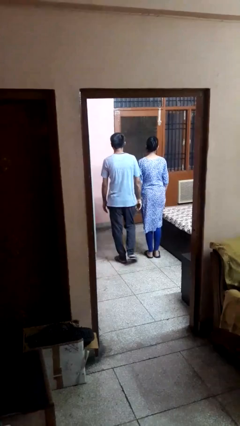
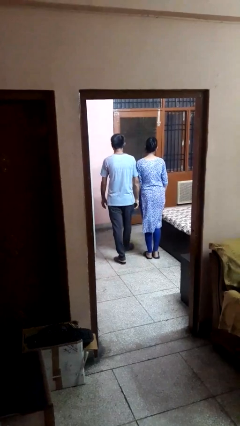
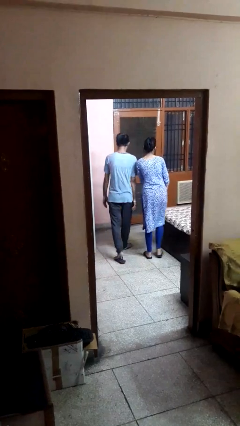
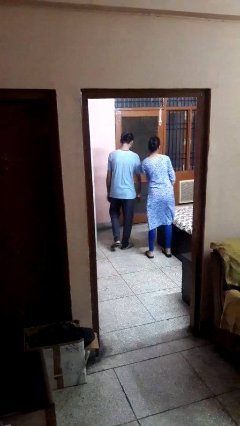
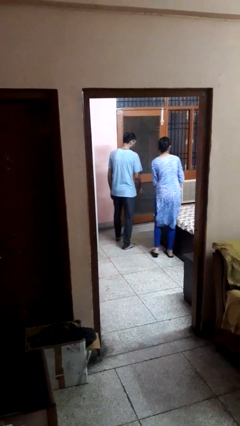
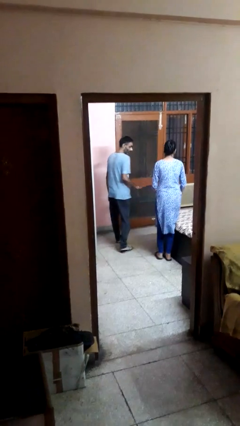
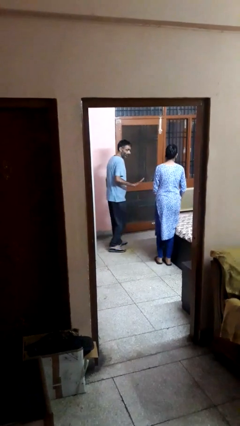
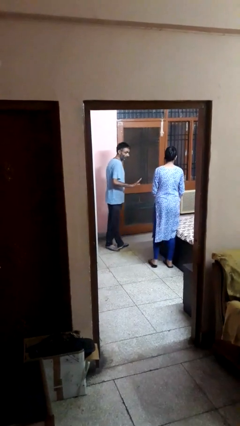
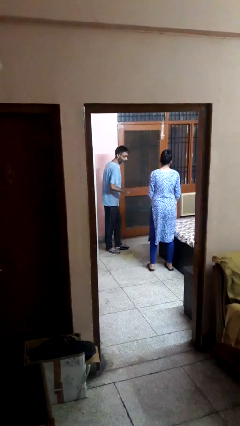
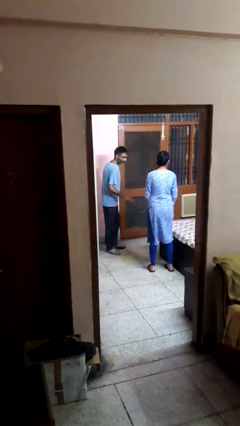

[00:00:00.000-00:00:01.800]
person bumps into person

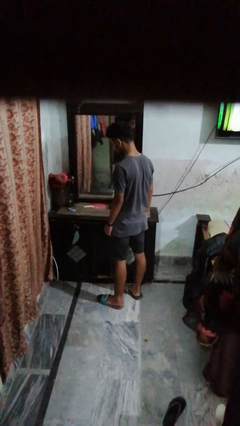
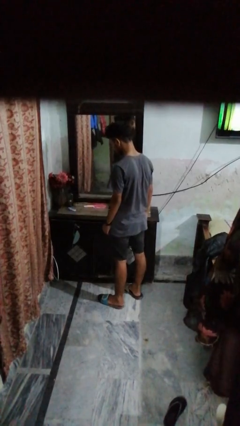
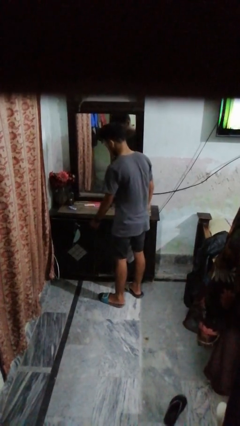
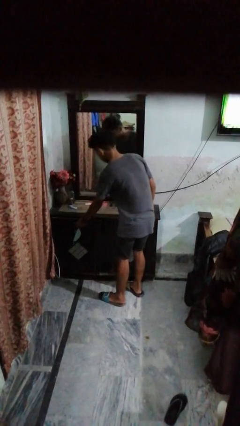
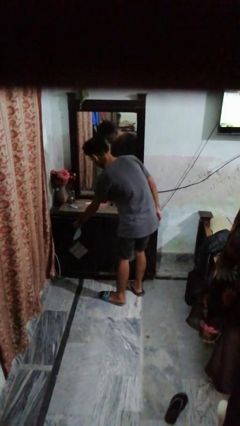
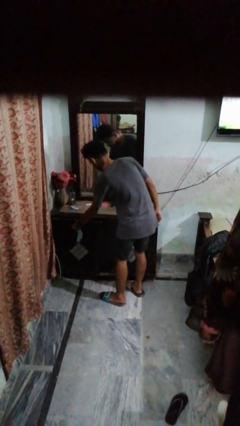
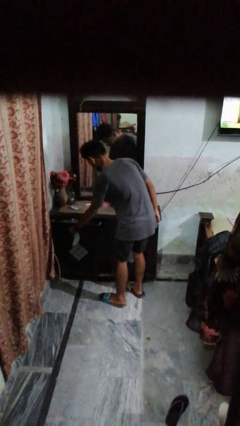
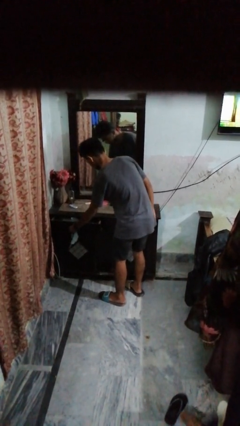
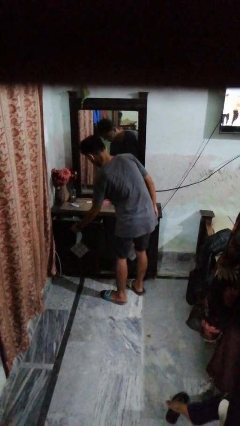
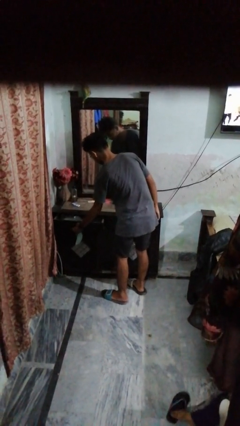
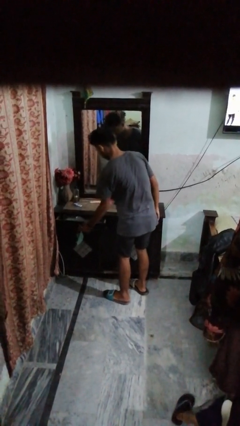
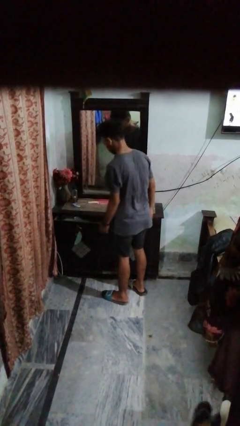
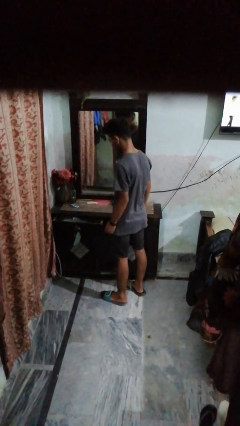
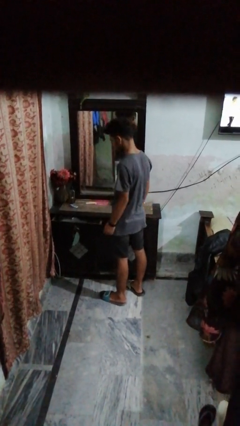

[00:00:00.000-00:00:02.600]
person opens dresser drawer

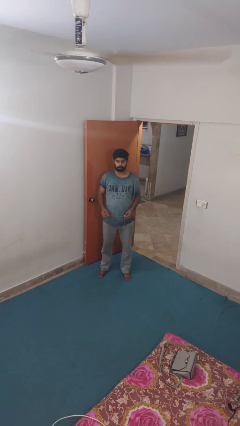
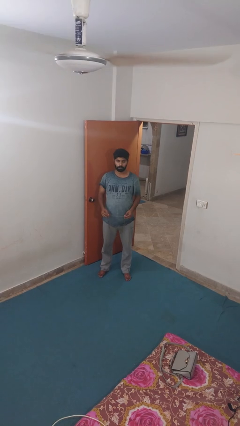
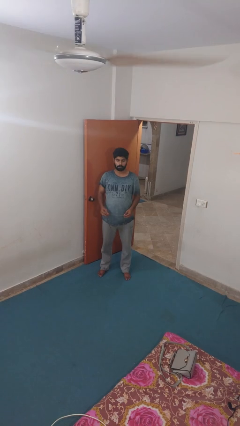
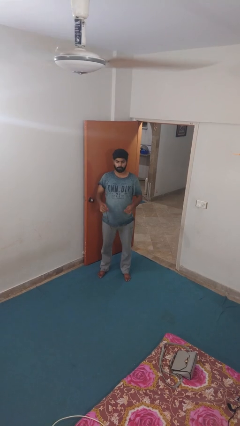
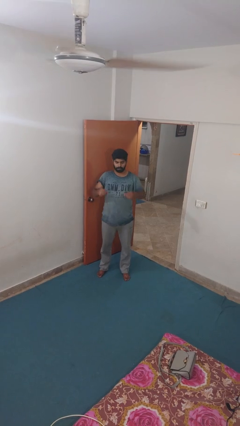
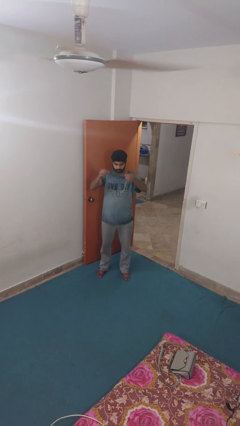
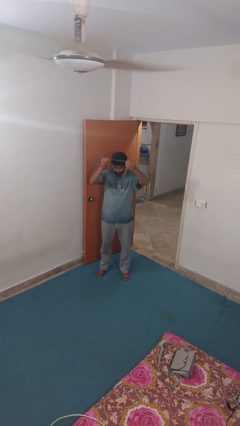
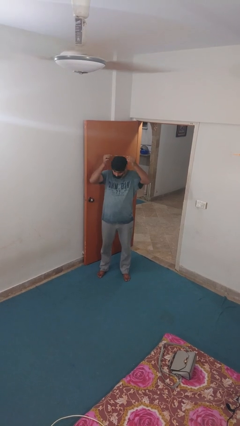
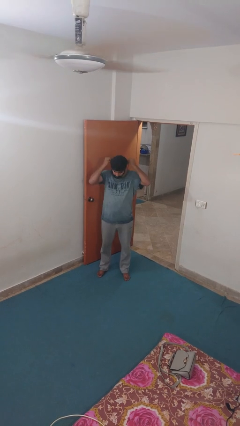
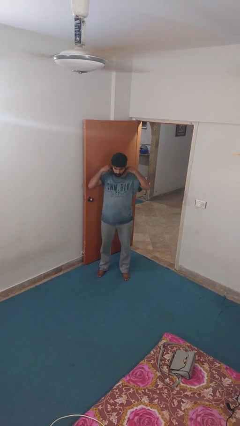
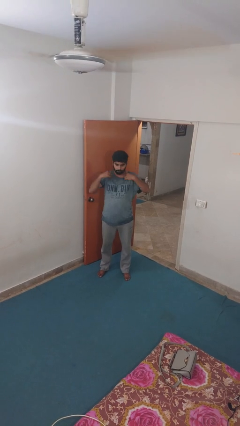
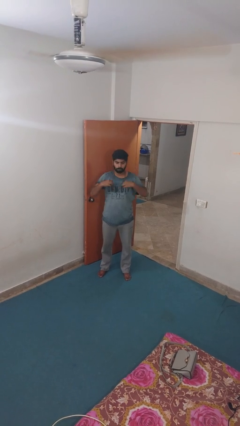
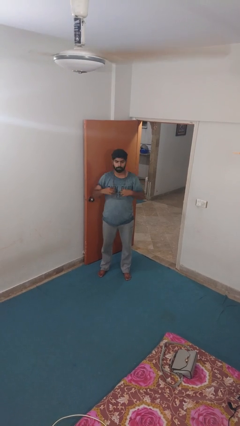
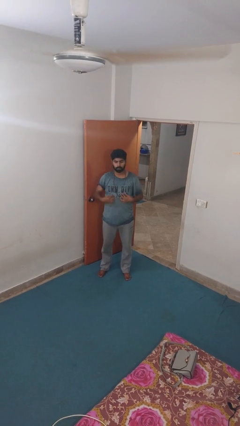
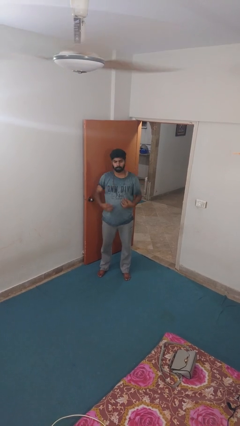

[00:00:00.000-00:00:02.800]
person puts on necklace

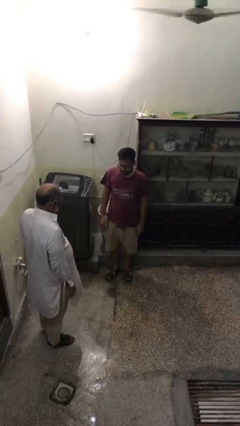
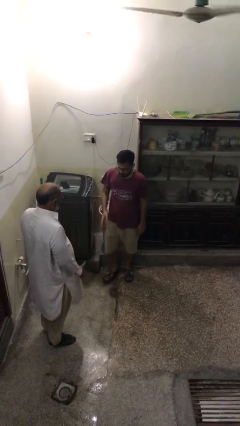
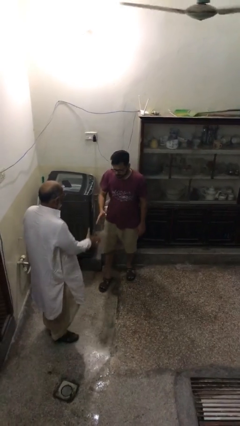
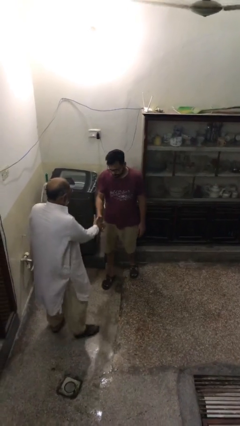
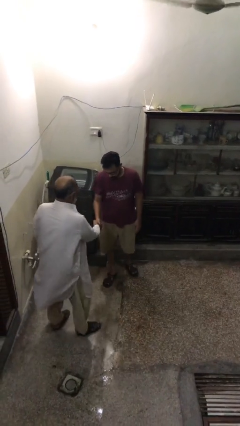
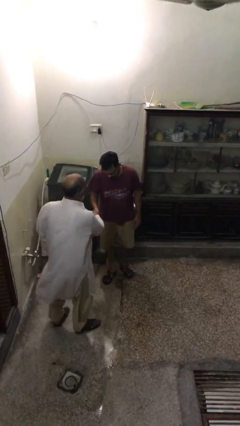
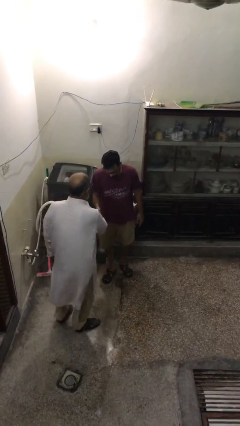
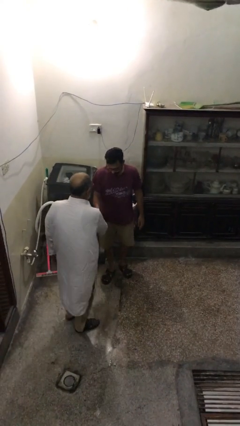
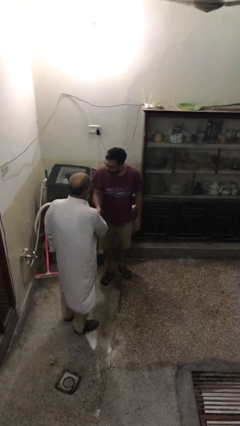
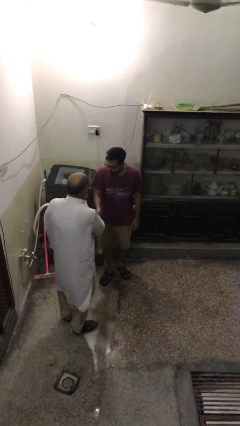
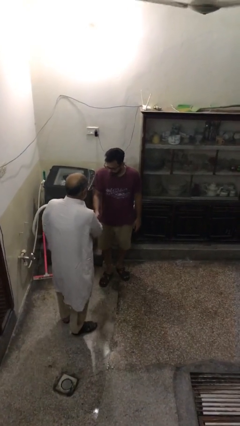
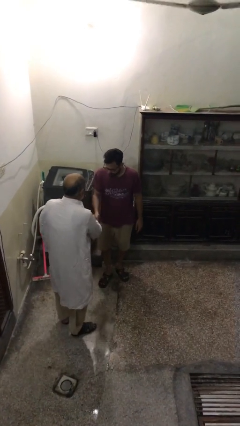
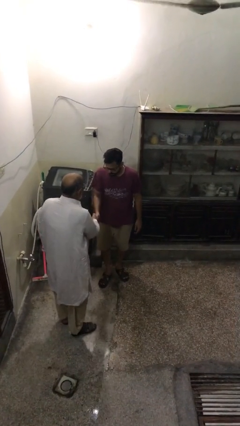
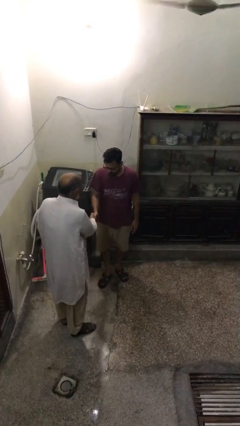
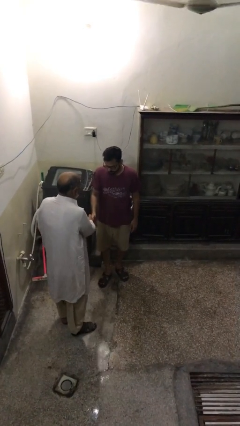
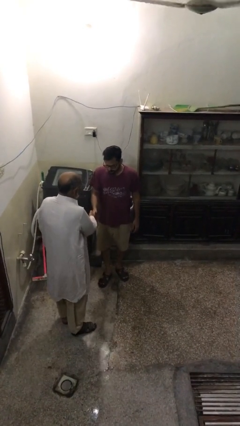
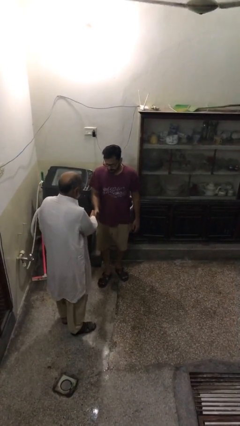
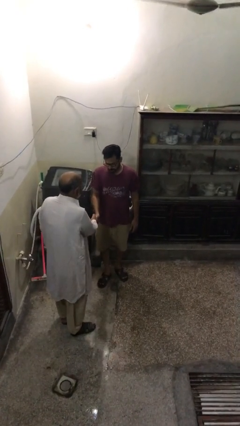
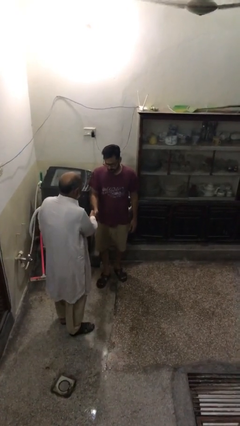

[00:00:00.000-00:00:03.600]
person shakes hand

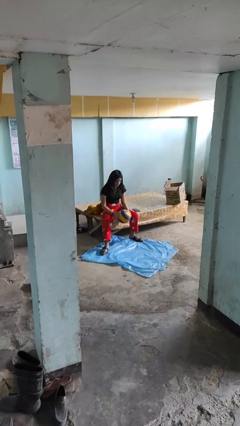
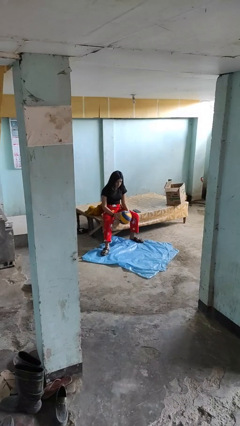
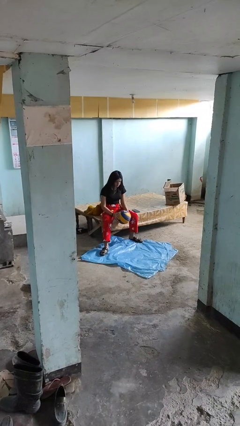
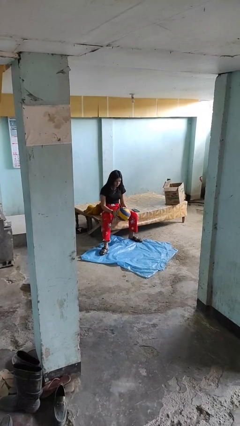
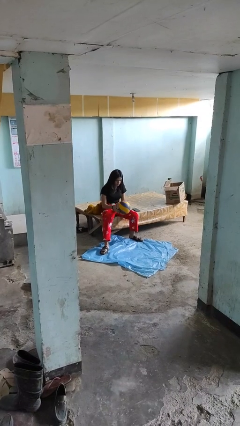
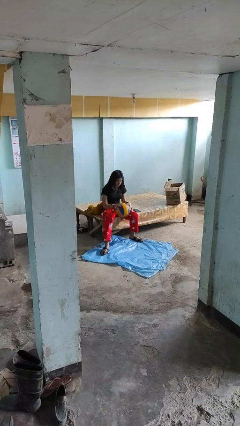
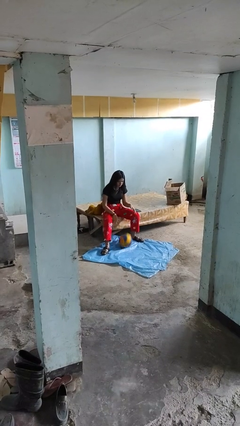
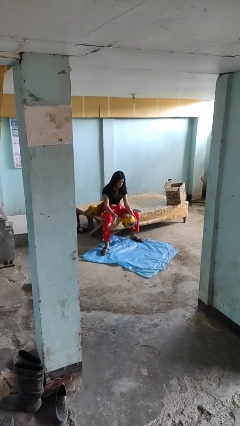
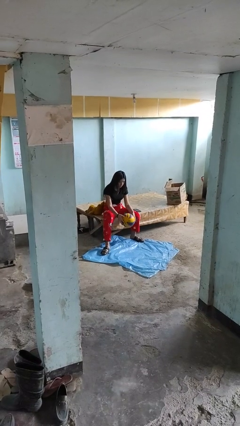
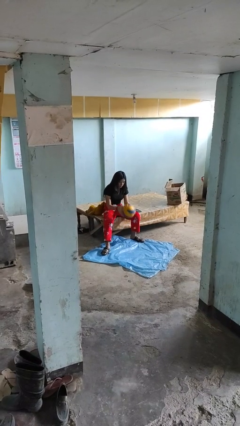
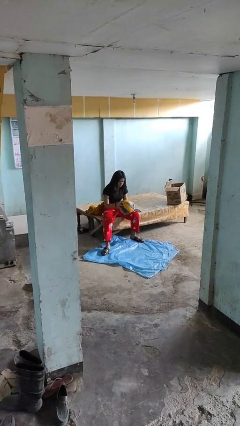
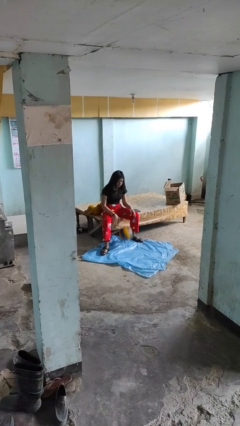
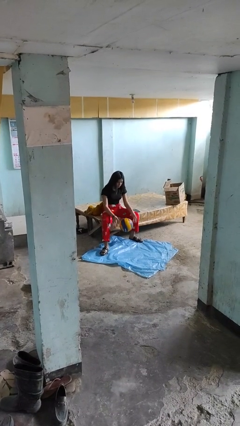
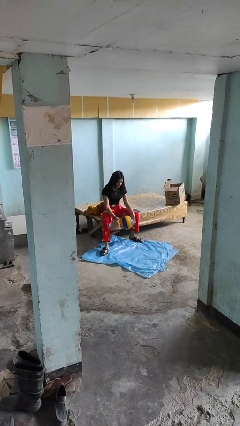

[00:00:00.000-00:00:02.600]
person bounces ball on floor

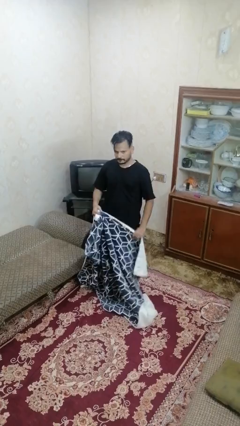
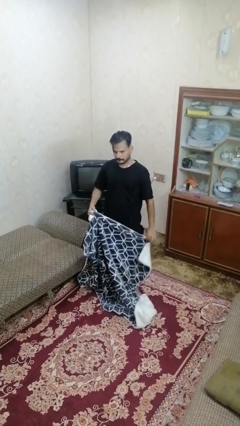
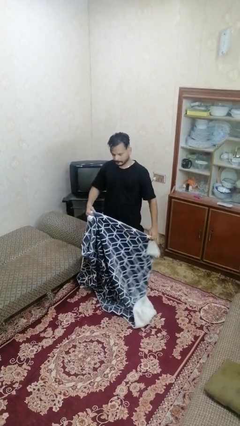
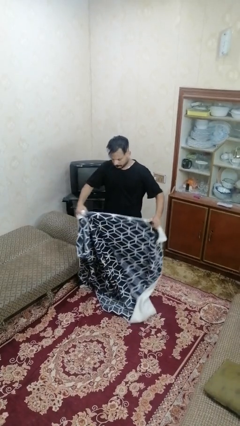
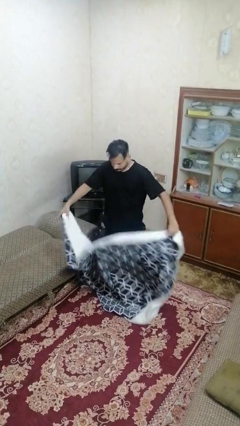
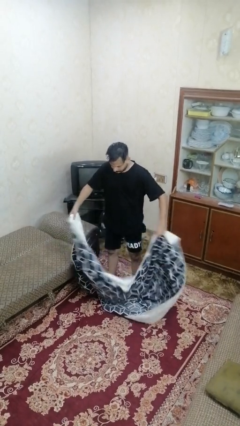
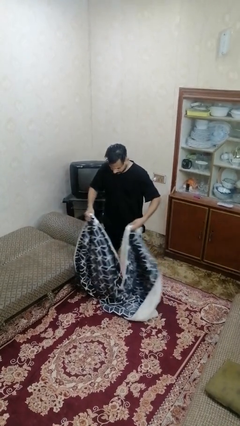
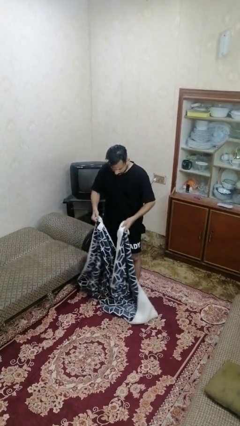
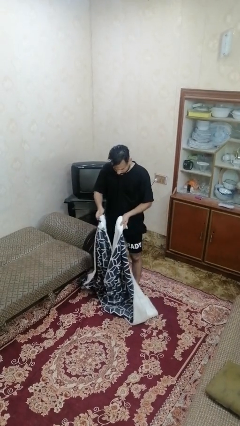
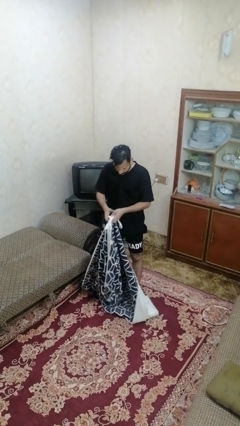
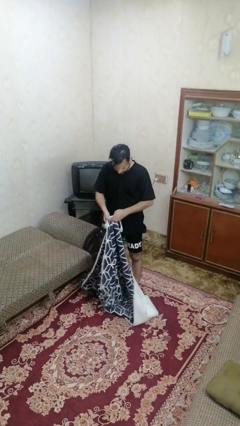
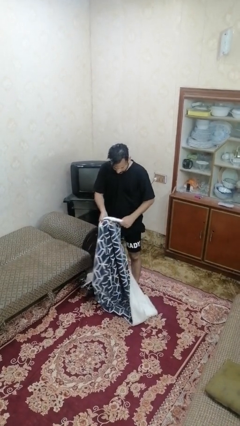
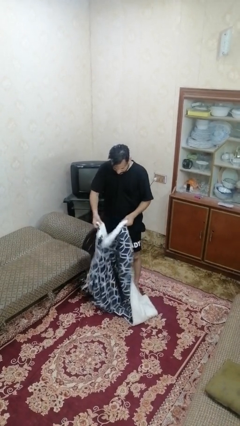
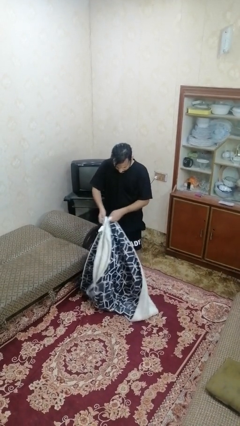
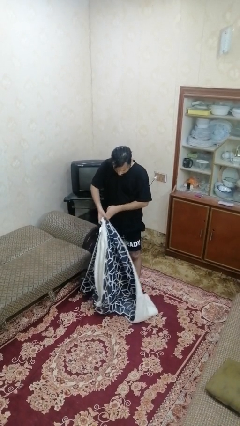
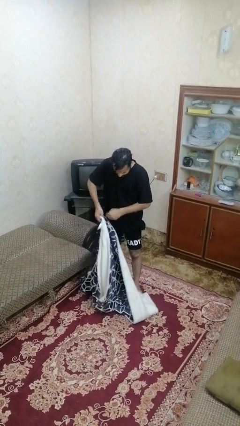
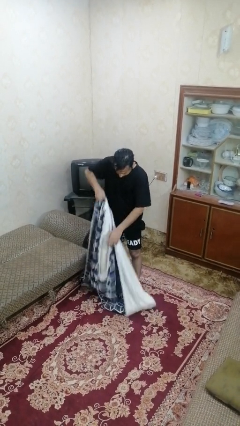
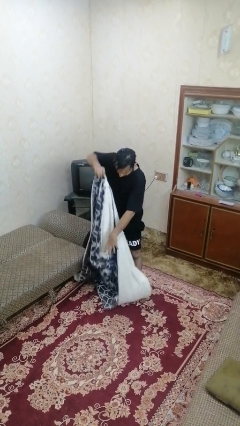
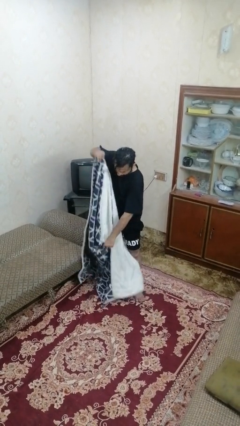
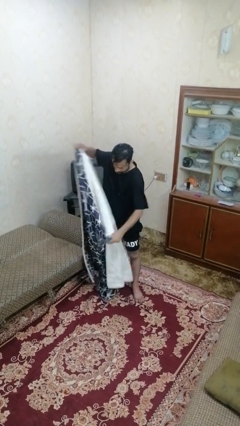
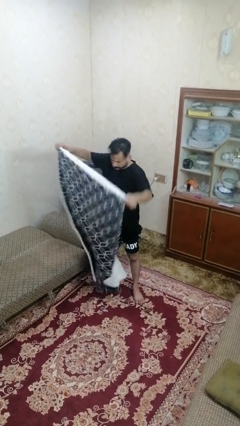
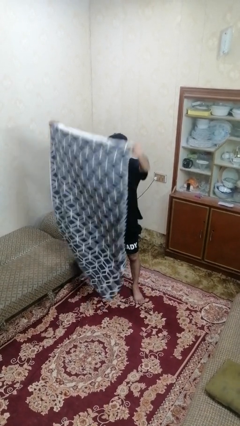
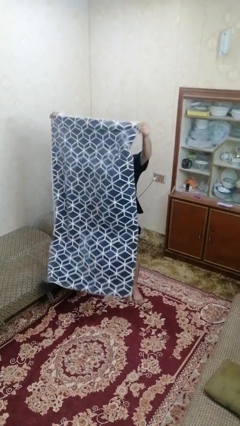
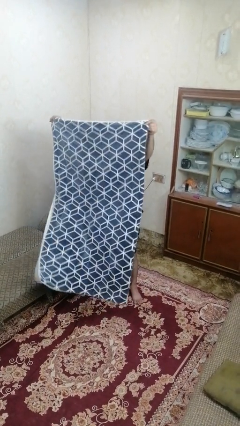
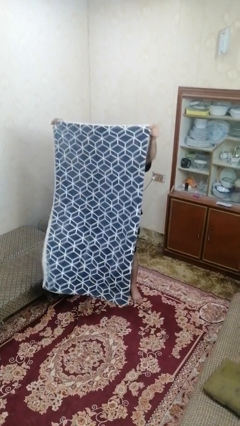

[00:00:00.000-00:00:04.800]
person folds blanket
